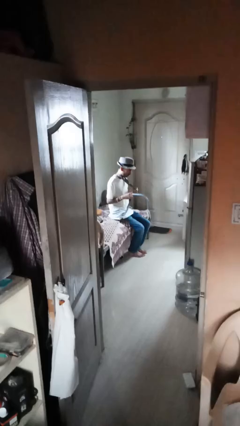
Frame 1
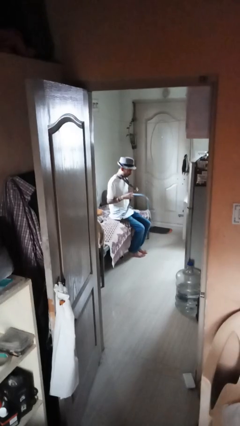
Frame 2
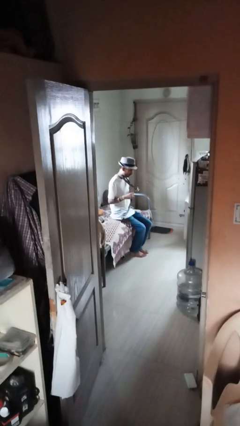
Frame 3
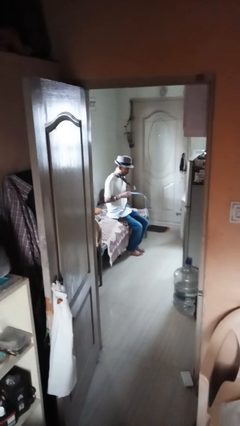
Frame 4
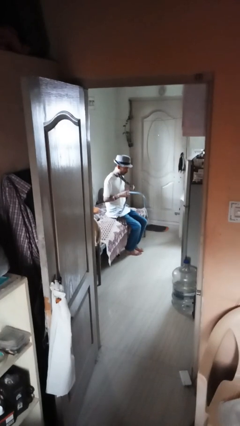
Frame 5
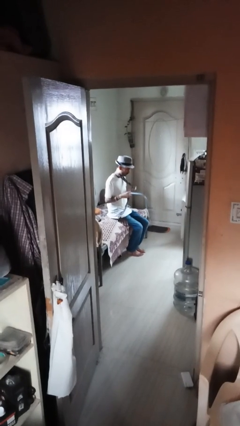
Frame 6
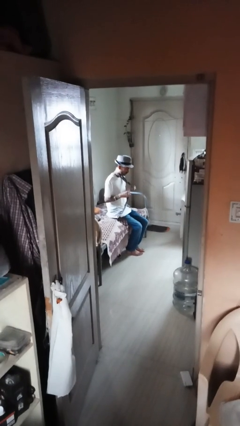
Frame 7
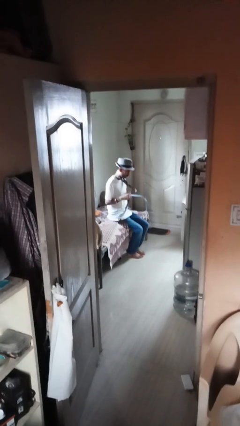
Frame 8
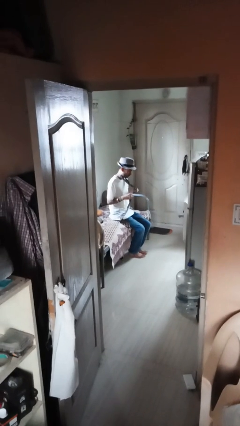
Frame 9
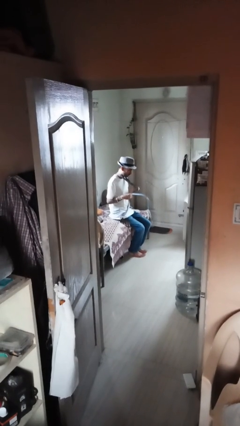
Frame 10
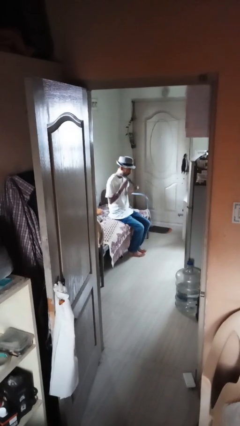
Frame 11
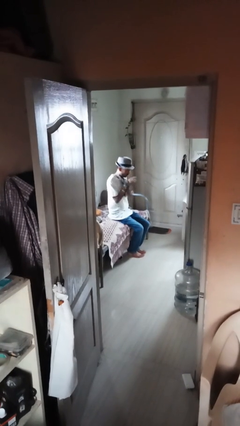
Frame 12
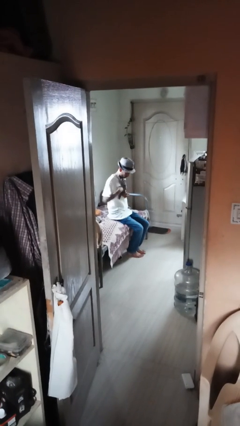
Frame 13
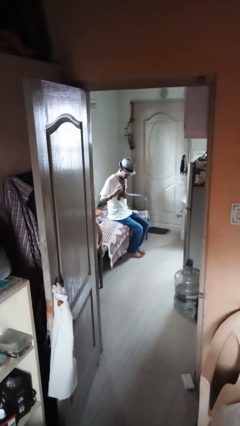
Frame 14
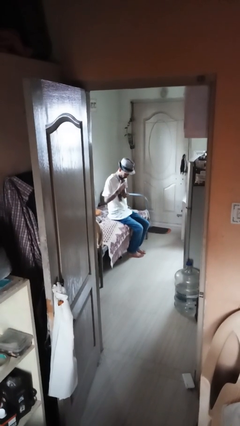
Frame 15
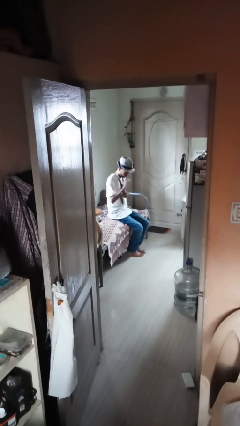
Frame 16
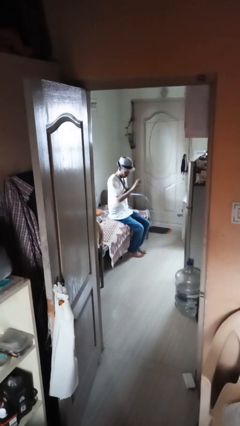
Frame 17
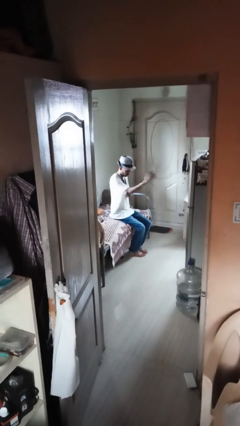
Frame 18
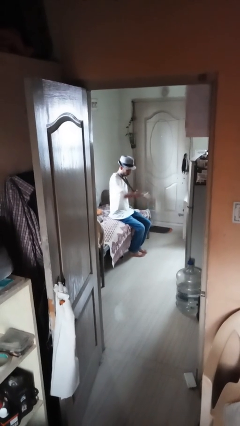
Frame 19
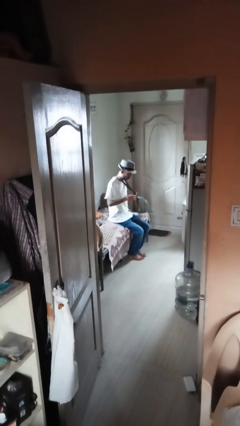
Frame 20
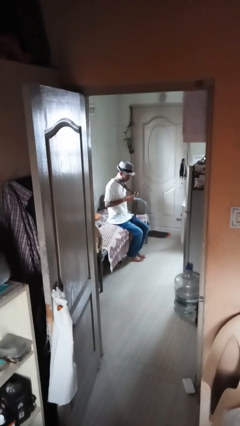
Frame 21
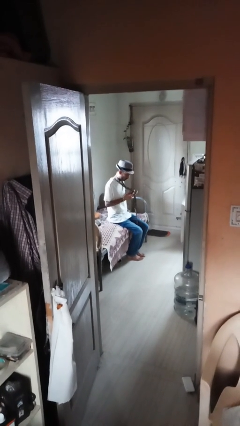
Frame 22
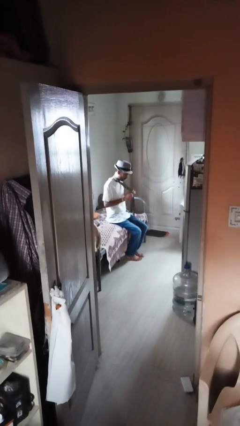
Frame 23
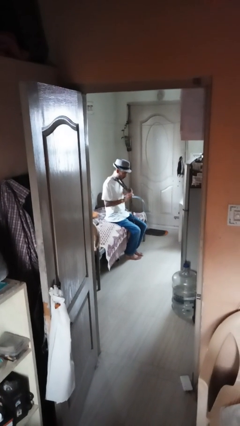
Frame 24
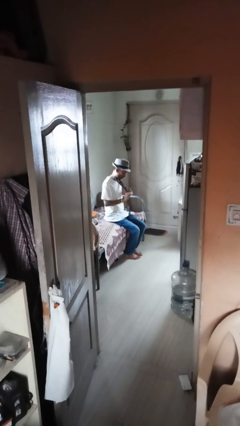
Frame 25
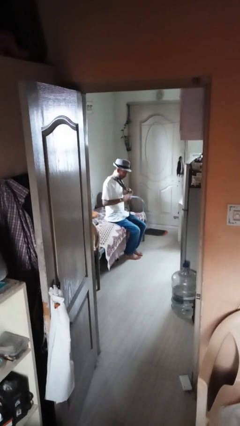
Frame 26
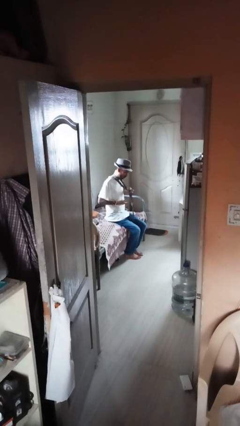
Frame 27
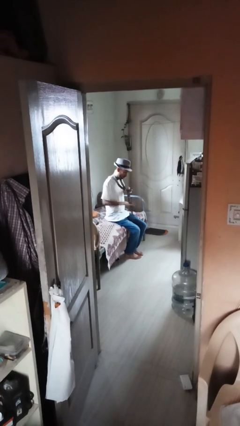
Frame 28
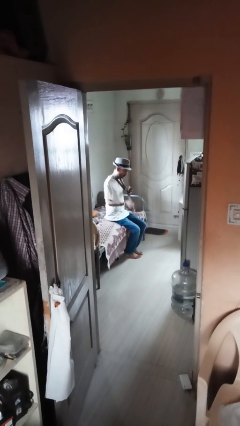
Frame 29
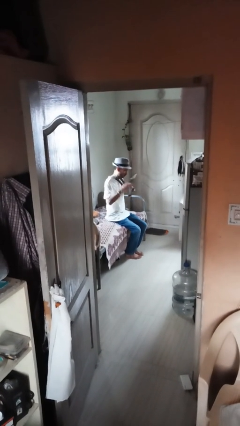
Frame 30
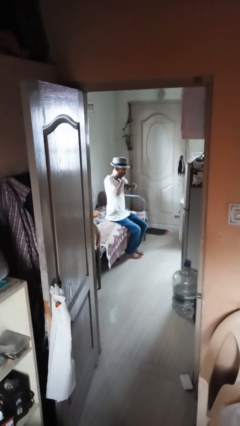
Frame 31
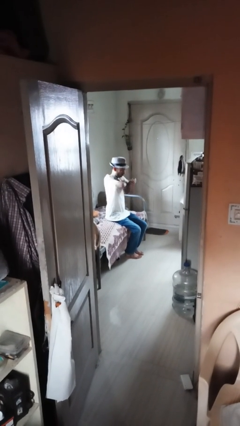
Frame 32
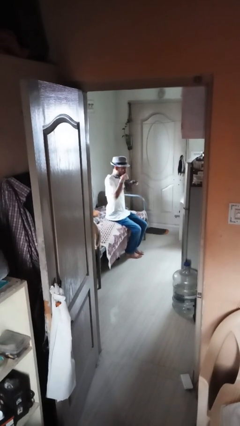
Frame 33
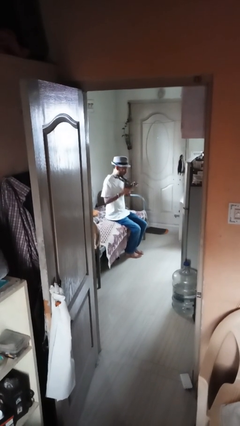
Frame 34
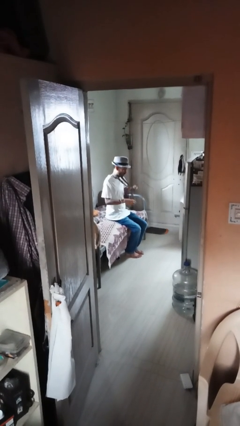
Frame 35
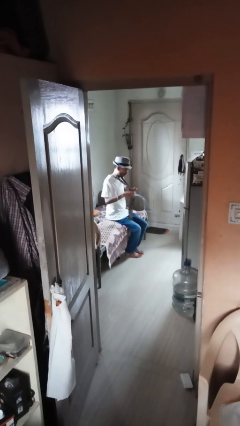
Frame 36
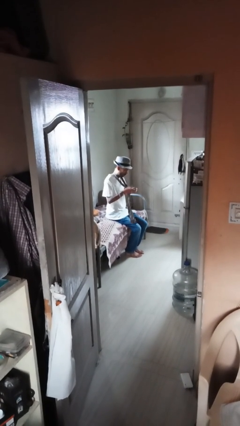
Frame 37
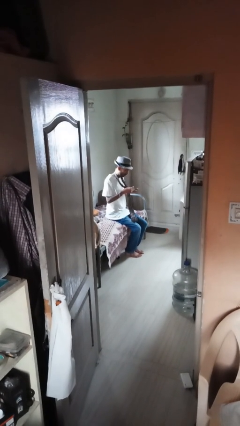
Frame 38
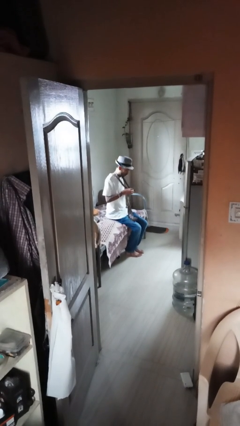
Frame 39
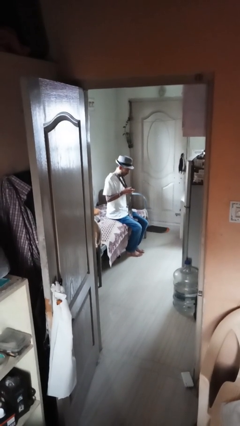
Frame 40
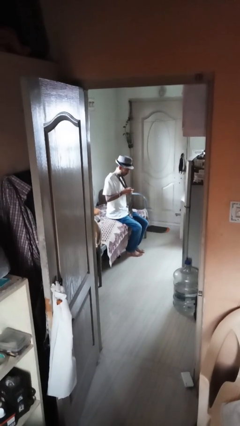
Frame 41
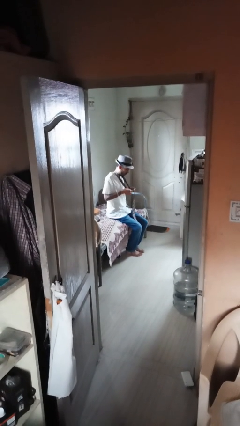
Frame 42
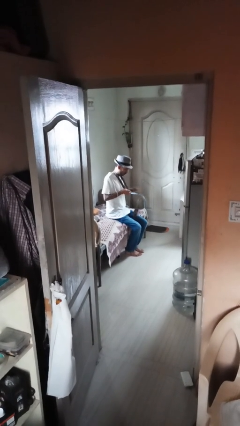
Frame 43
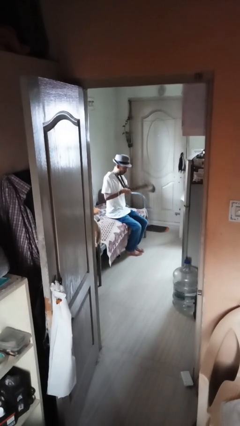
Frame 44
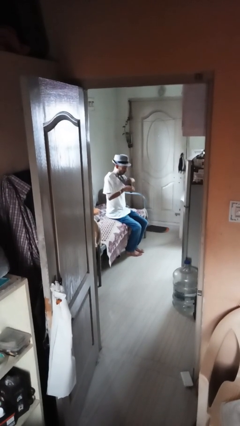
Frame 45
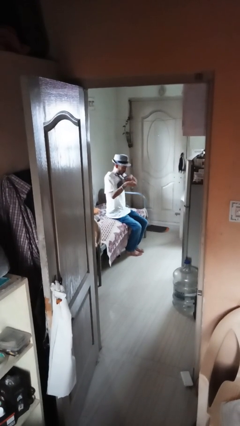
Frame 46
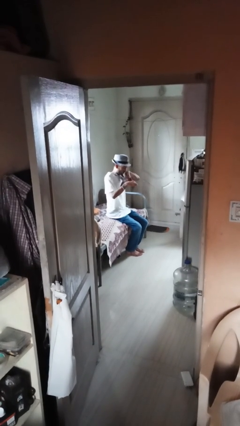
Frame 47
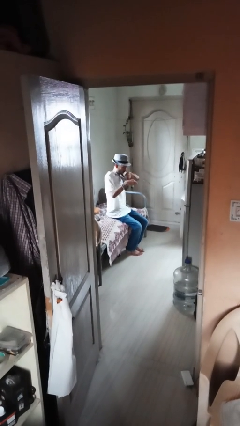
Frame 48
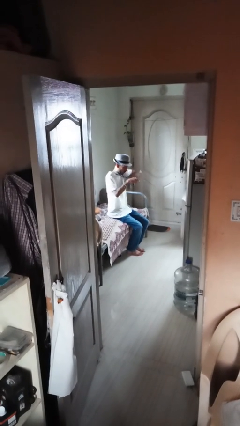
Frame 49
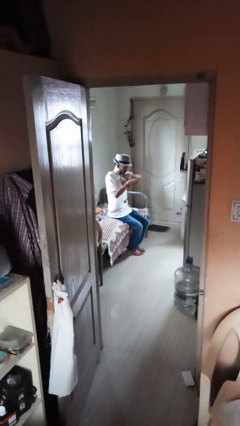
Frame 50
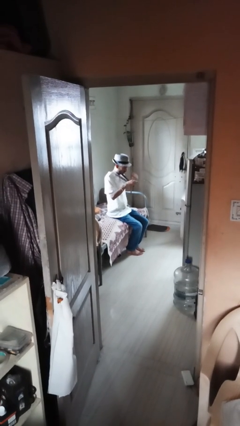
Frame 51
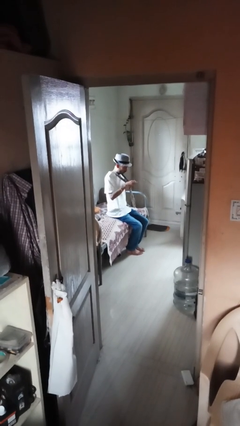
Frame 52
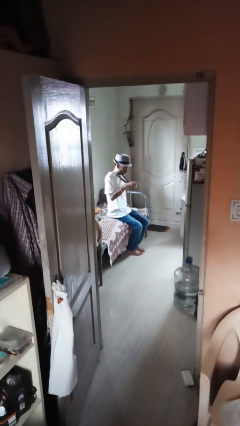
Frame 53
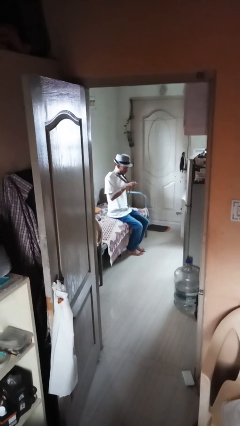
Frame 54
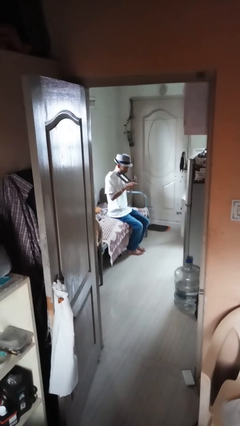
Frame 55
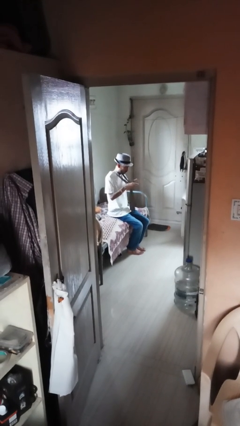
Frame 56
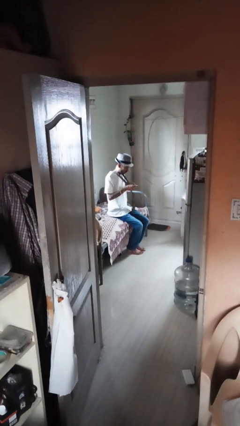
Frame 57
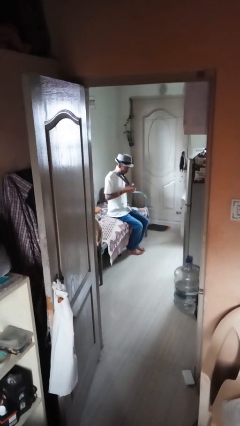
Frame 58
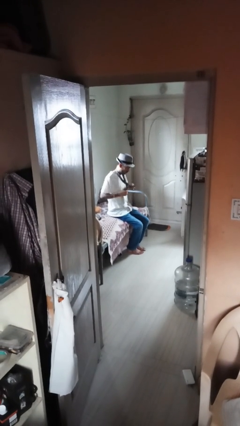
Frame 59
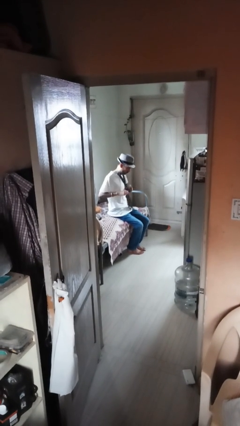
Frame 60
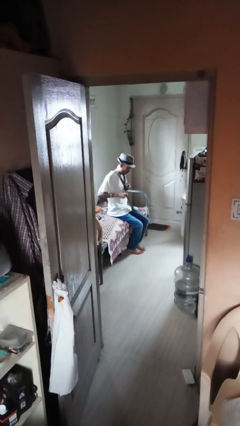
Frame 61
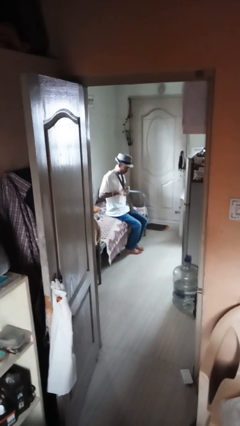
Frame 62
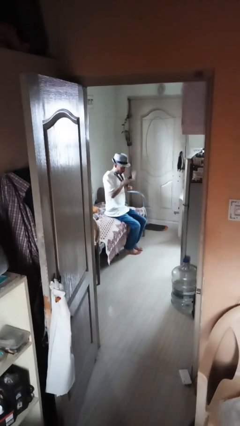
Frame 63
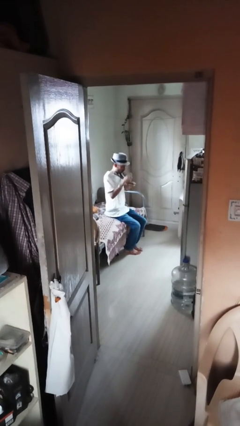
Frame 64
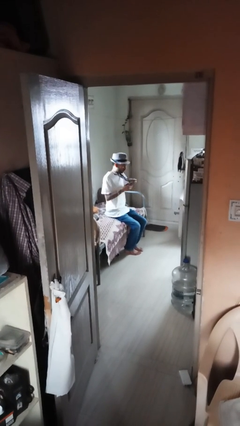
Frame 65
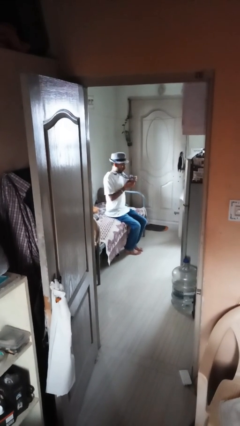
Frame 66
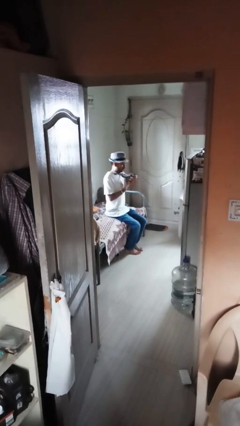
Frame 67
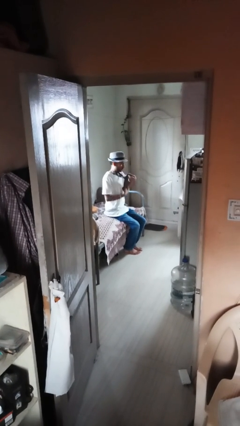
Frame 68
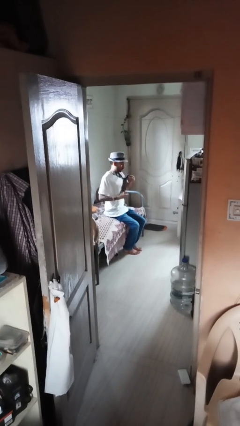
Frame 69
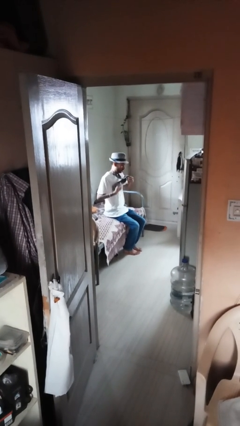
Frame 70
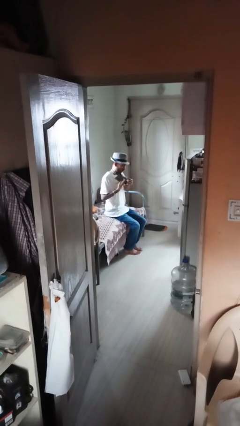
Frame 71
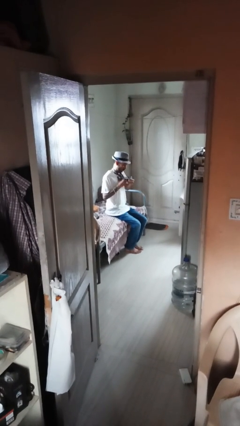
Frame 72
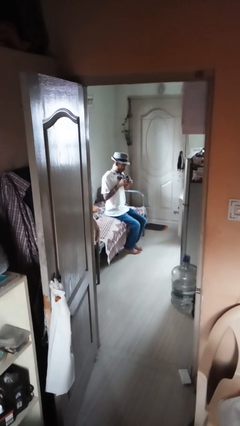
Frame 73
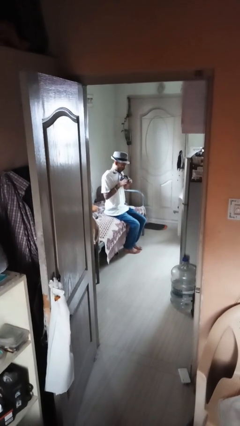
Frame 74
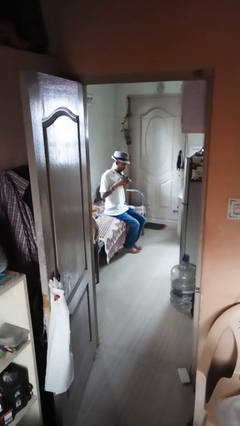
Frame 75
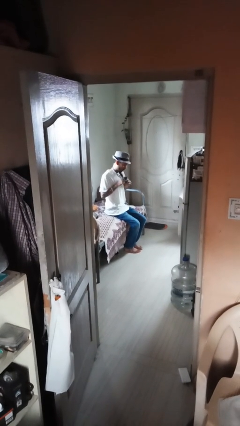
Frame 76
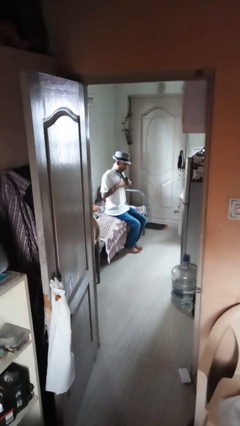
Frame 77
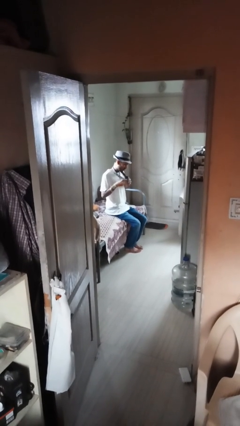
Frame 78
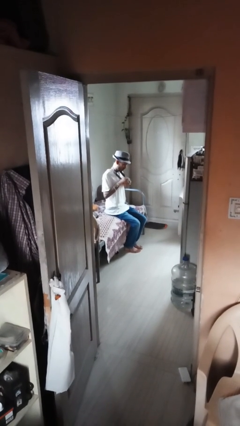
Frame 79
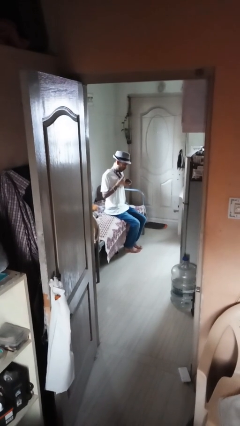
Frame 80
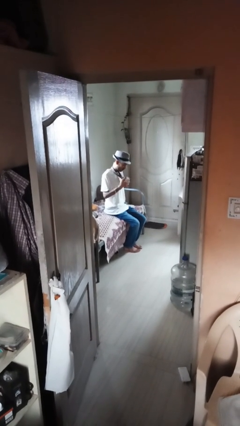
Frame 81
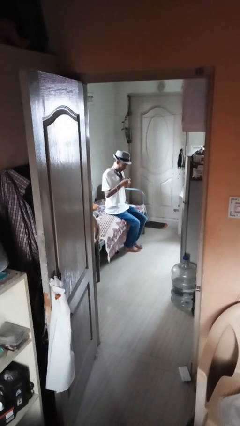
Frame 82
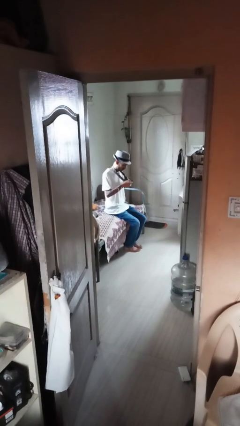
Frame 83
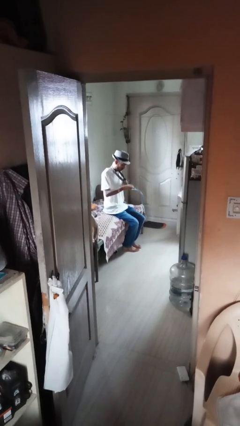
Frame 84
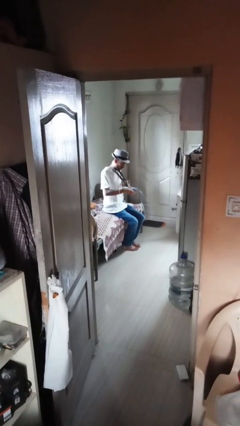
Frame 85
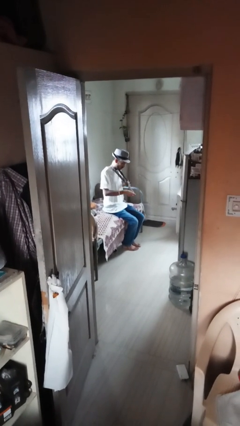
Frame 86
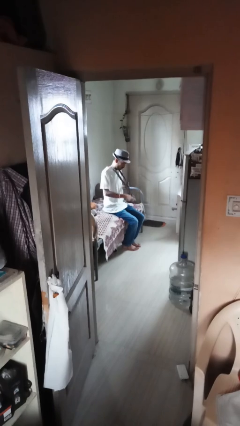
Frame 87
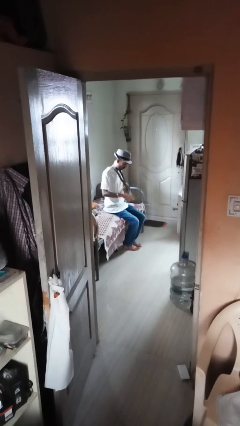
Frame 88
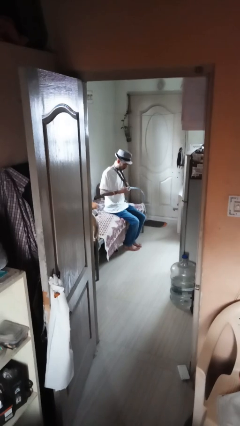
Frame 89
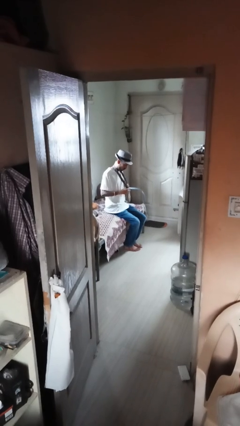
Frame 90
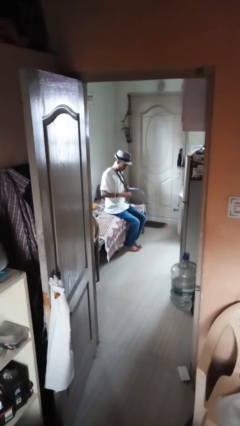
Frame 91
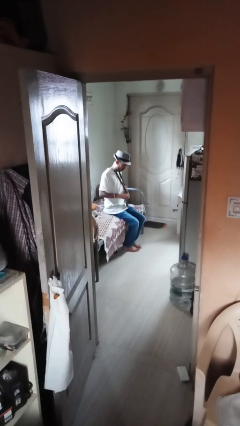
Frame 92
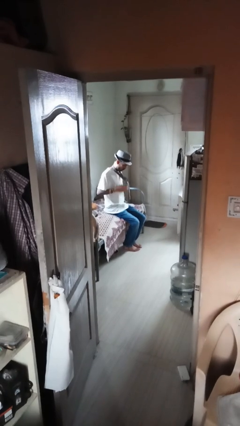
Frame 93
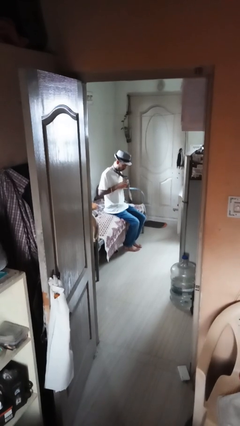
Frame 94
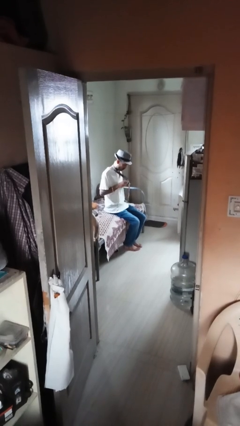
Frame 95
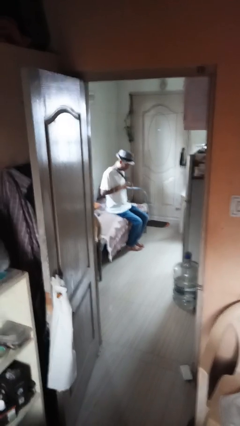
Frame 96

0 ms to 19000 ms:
person puts on necktie
